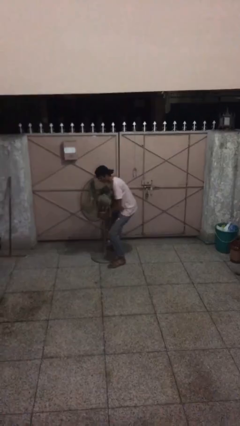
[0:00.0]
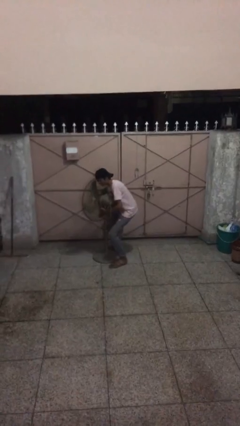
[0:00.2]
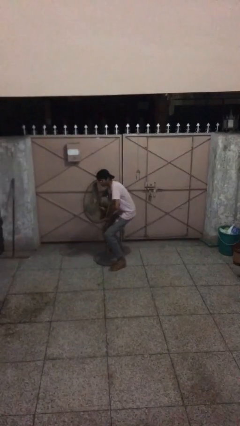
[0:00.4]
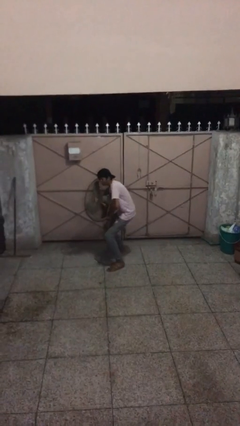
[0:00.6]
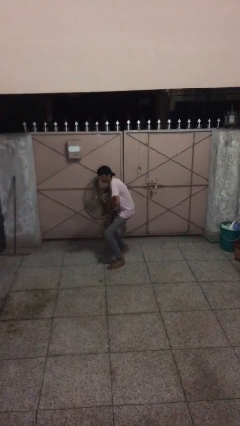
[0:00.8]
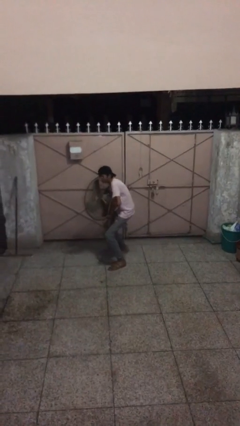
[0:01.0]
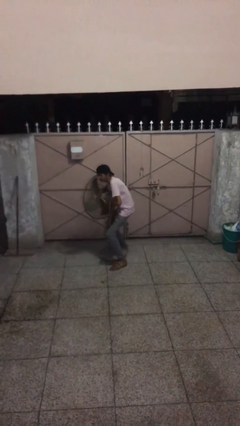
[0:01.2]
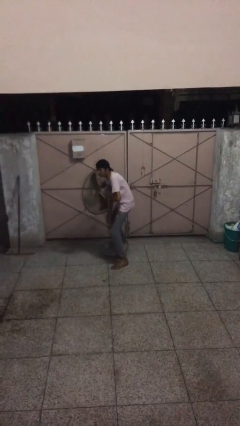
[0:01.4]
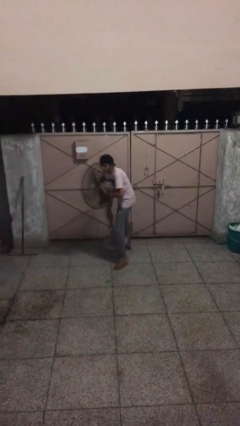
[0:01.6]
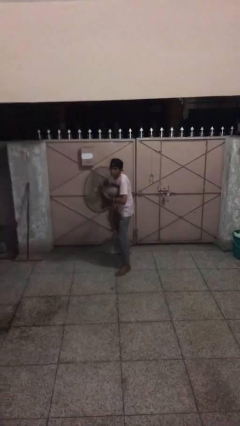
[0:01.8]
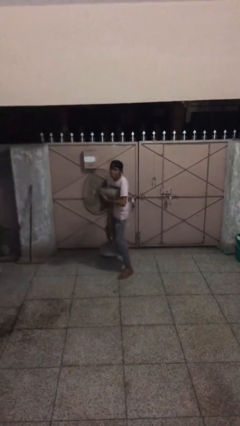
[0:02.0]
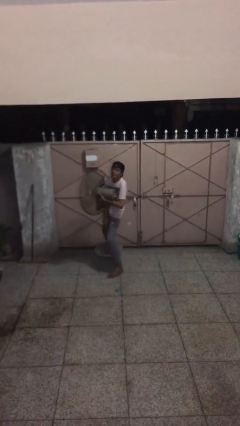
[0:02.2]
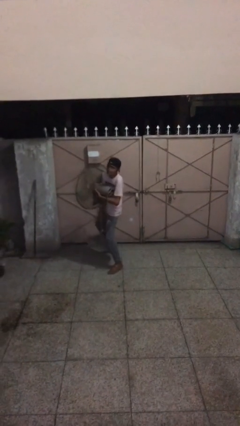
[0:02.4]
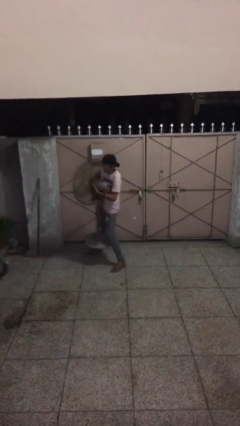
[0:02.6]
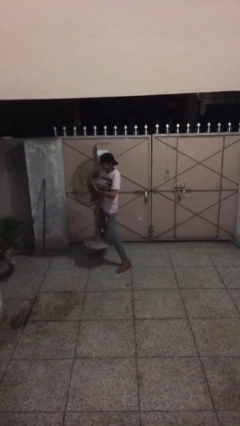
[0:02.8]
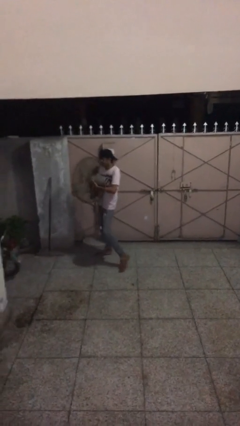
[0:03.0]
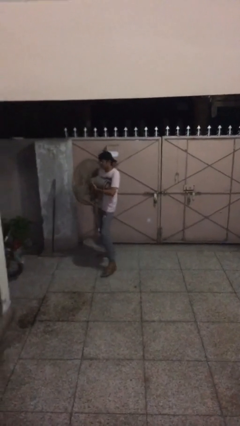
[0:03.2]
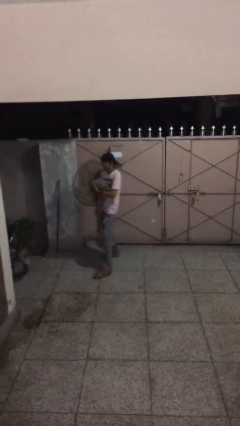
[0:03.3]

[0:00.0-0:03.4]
person picks up object from floor

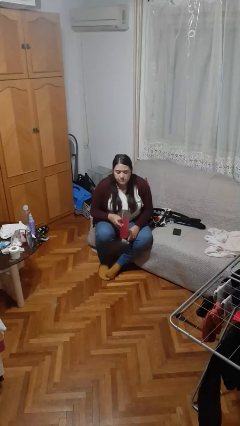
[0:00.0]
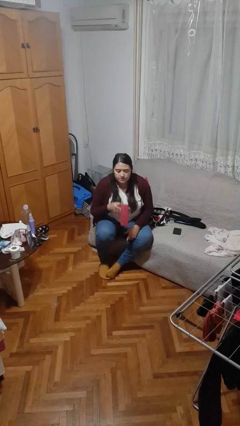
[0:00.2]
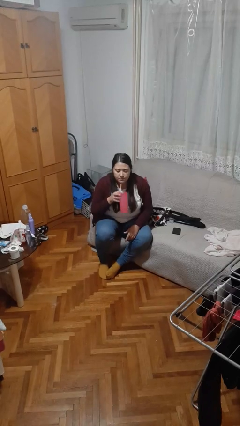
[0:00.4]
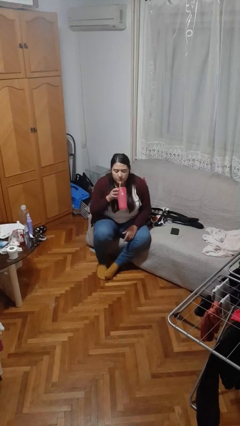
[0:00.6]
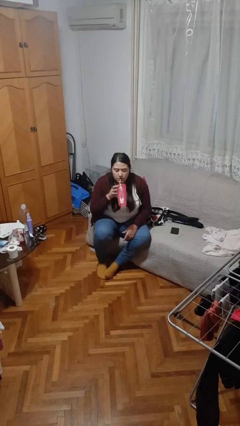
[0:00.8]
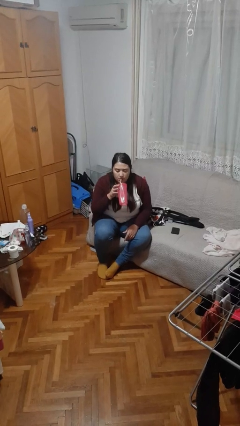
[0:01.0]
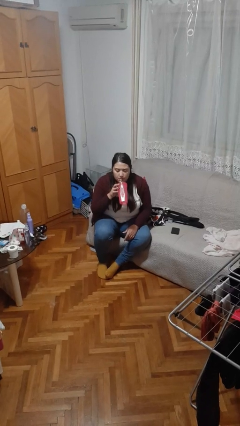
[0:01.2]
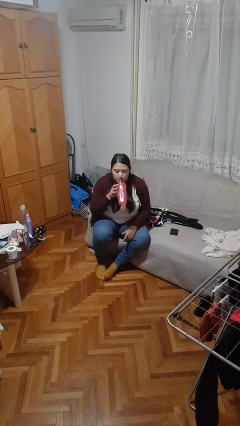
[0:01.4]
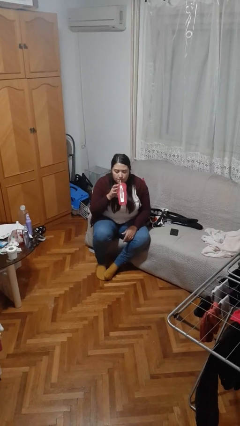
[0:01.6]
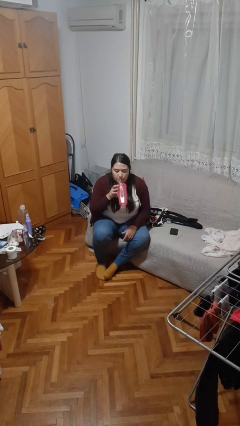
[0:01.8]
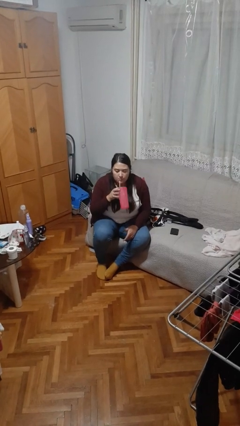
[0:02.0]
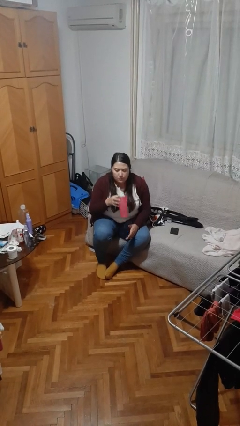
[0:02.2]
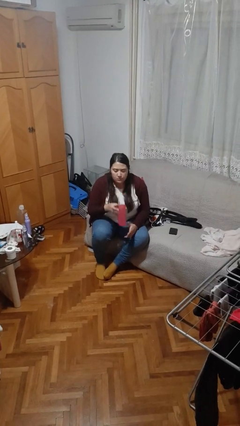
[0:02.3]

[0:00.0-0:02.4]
person drinks from straw

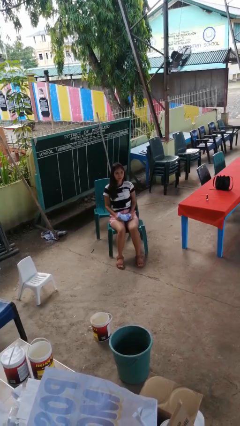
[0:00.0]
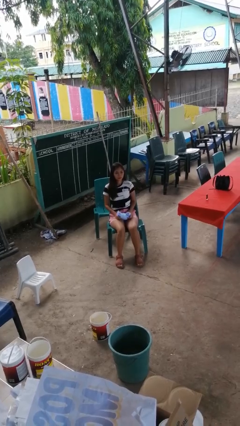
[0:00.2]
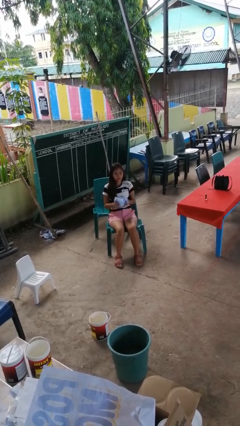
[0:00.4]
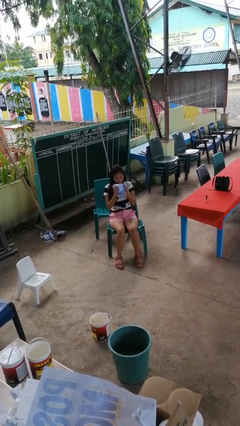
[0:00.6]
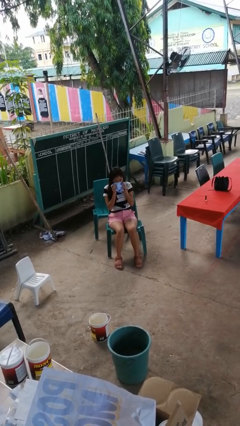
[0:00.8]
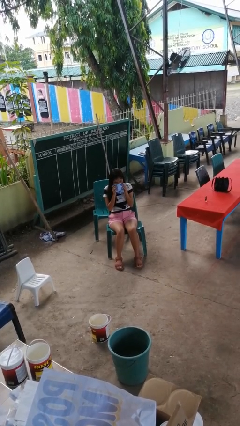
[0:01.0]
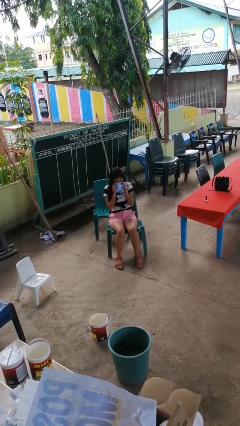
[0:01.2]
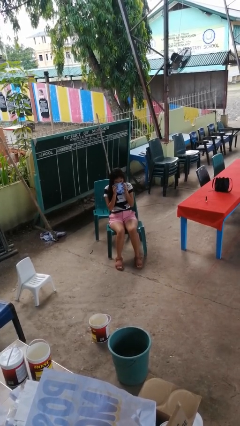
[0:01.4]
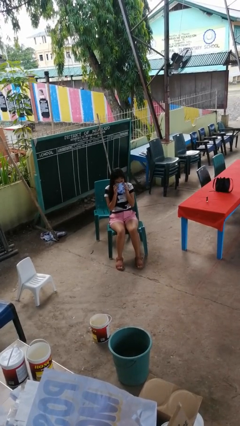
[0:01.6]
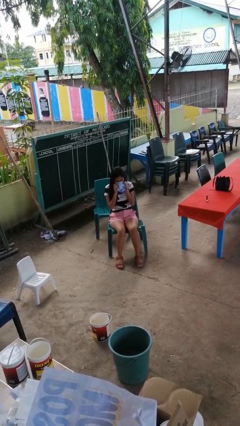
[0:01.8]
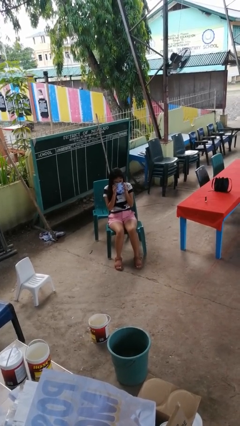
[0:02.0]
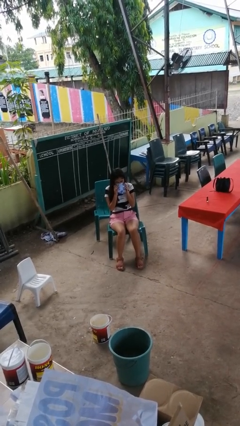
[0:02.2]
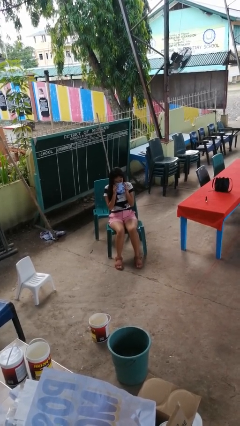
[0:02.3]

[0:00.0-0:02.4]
person blows nose

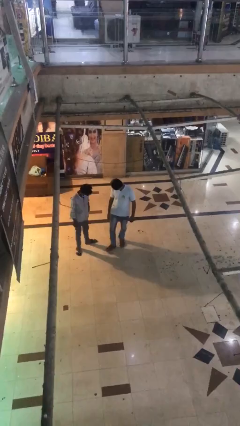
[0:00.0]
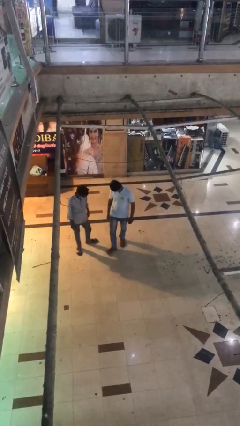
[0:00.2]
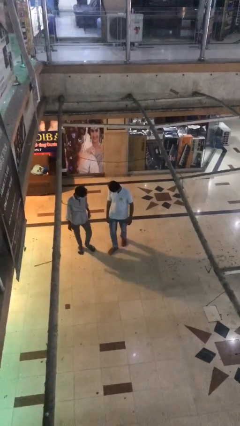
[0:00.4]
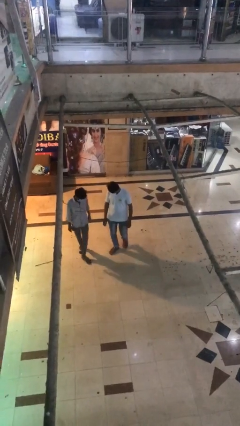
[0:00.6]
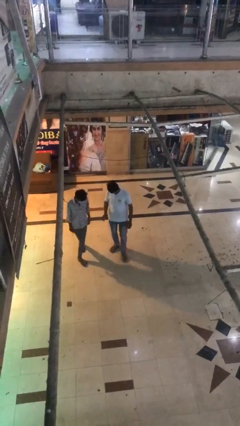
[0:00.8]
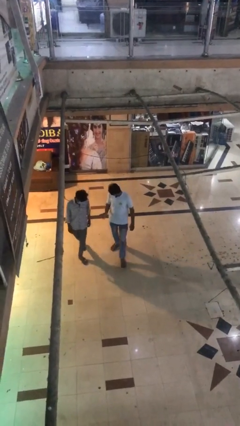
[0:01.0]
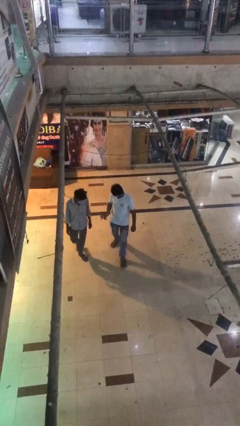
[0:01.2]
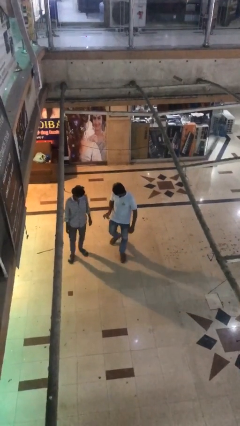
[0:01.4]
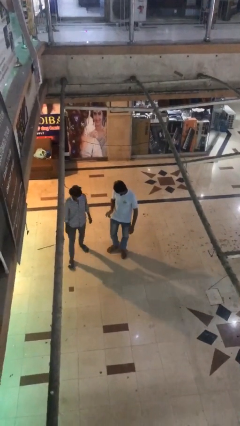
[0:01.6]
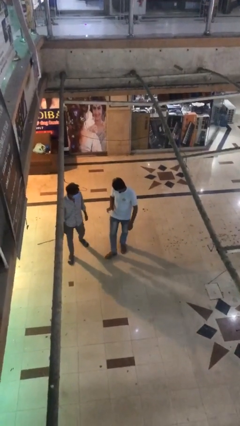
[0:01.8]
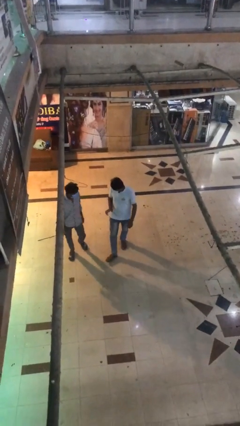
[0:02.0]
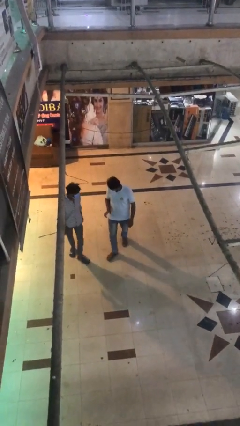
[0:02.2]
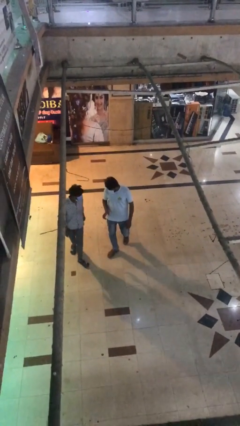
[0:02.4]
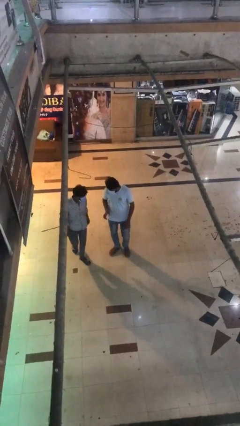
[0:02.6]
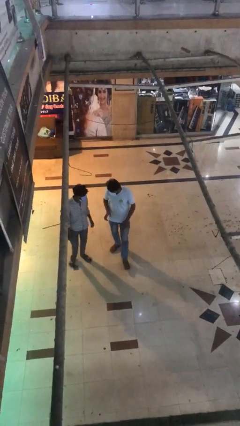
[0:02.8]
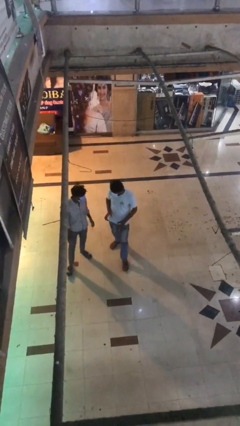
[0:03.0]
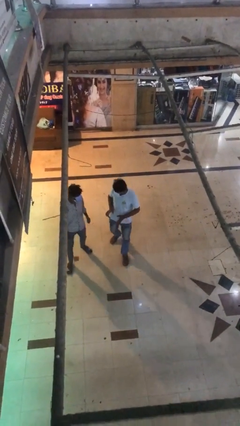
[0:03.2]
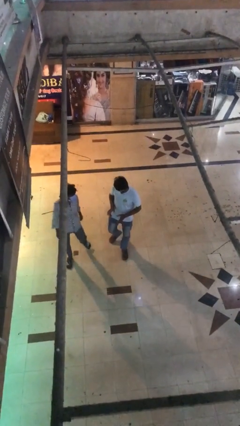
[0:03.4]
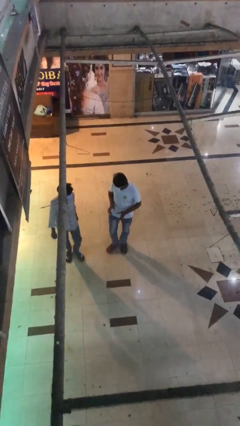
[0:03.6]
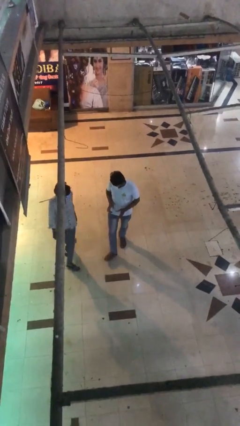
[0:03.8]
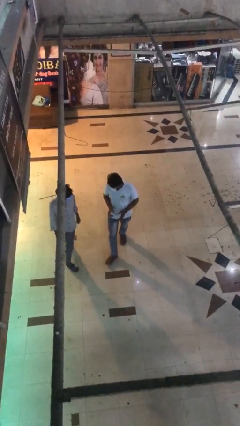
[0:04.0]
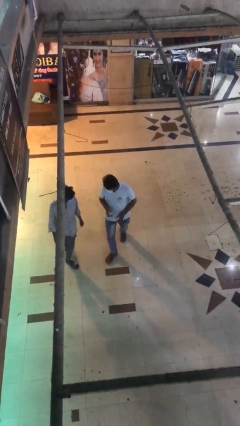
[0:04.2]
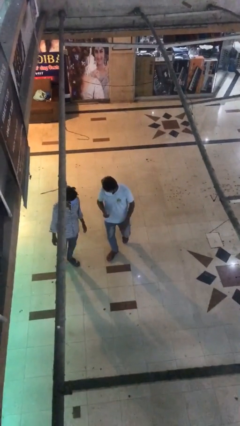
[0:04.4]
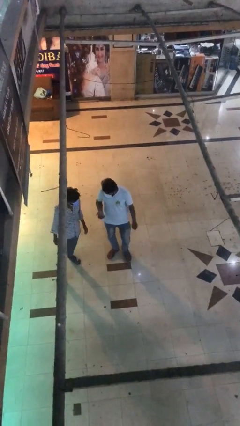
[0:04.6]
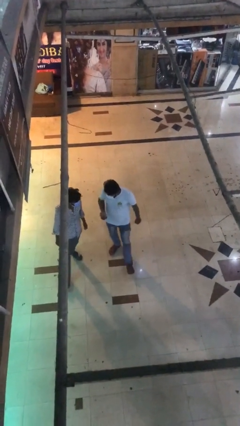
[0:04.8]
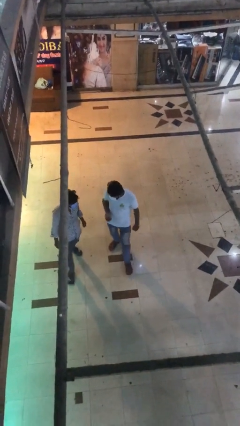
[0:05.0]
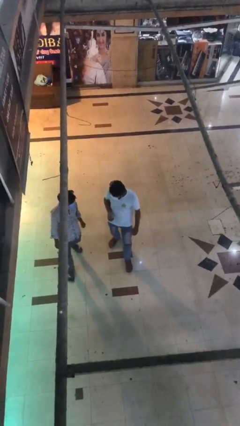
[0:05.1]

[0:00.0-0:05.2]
person talks to person

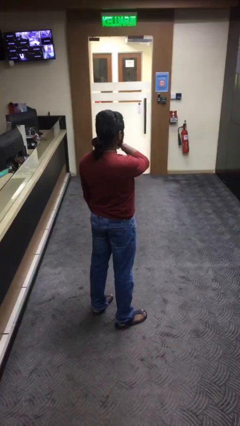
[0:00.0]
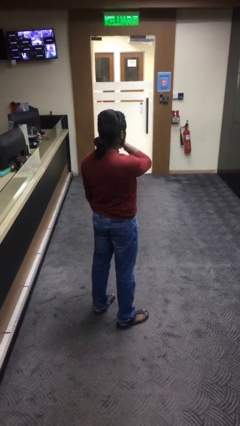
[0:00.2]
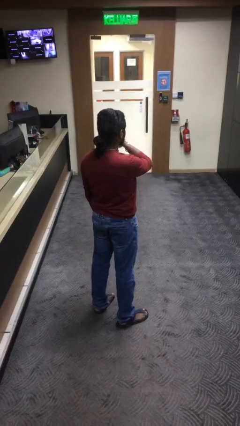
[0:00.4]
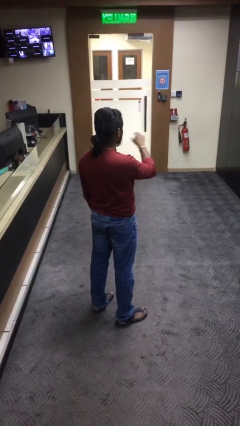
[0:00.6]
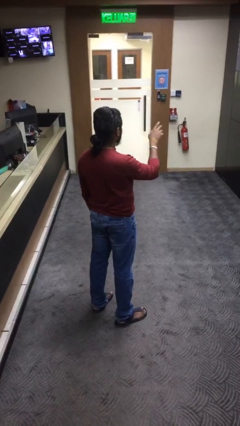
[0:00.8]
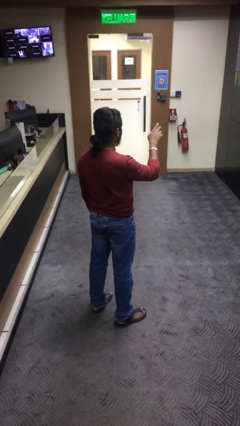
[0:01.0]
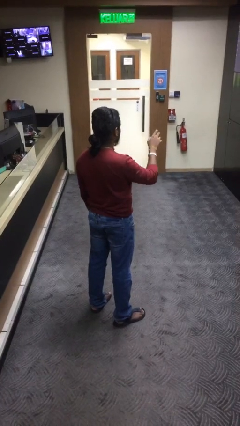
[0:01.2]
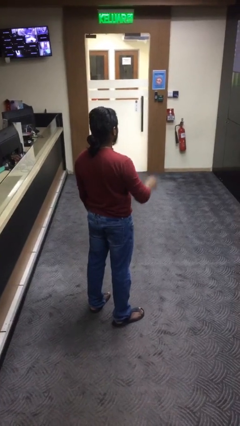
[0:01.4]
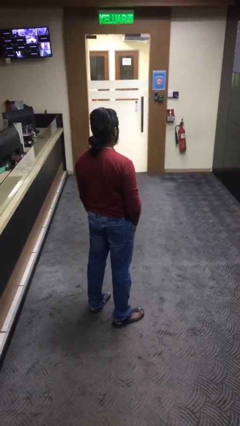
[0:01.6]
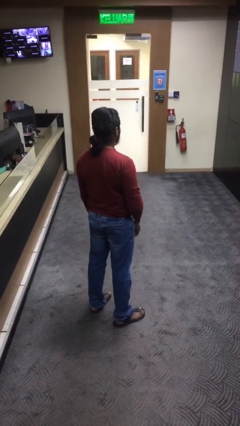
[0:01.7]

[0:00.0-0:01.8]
person gestures swipe right

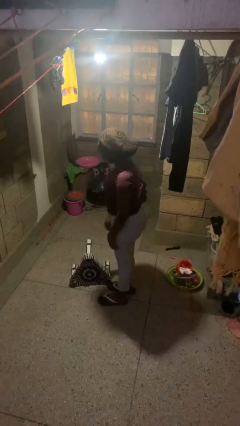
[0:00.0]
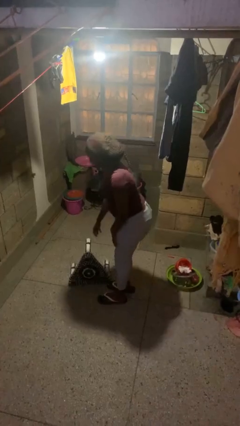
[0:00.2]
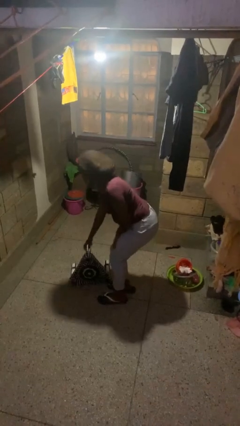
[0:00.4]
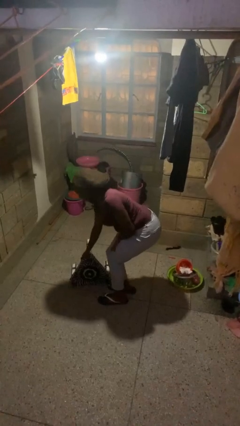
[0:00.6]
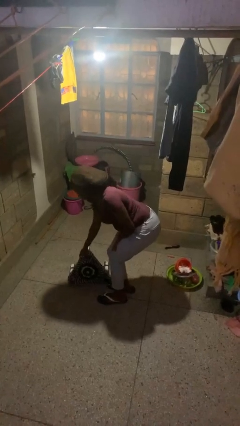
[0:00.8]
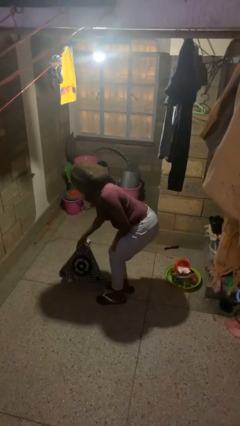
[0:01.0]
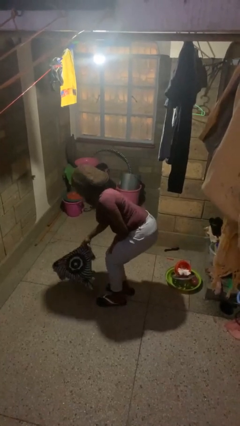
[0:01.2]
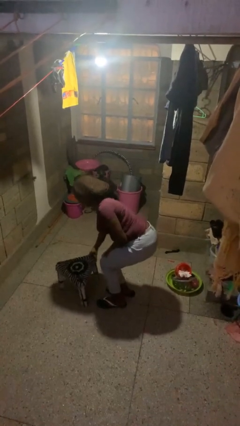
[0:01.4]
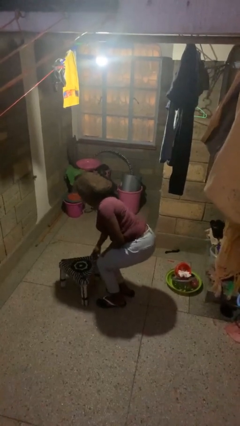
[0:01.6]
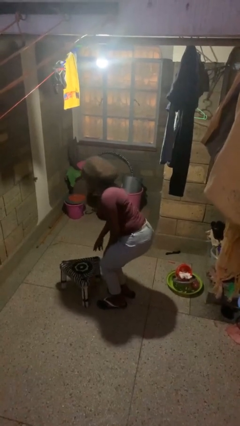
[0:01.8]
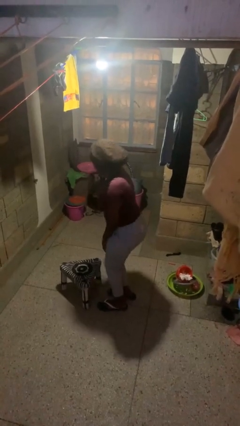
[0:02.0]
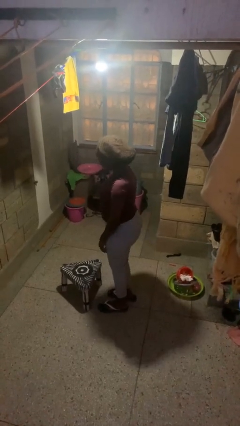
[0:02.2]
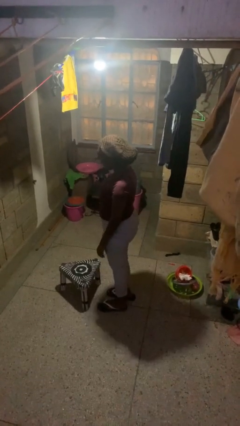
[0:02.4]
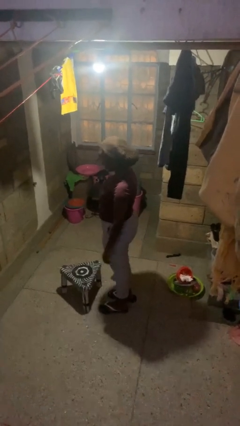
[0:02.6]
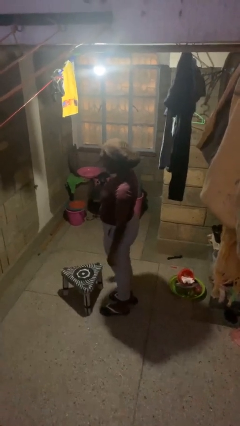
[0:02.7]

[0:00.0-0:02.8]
person sets upright furniture
